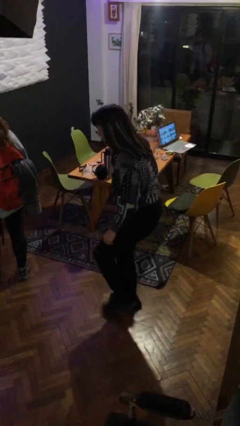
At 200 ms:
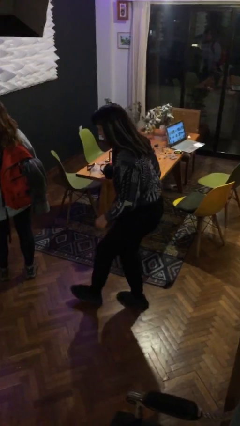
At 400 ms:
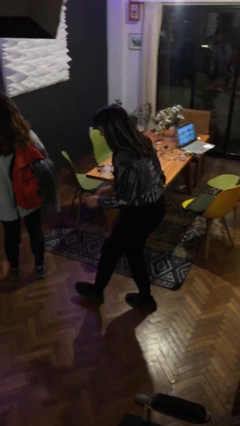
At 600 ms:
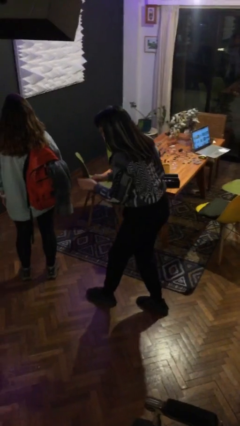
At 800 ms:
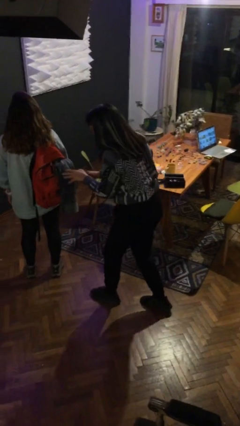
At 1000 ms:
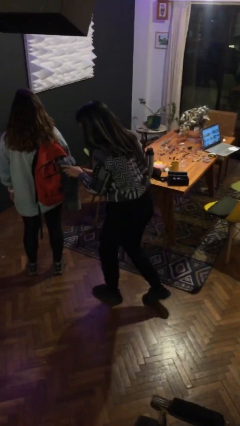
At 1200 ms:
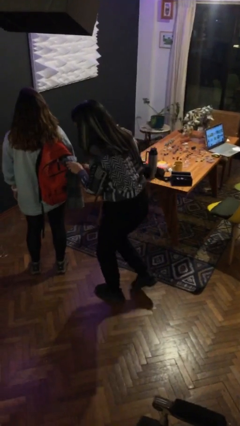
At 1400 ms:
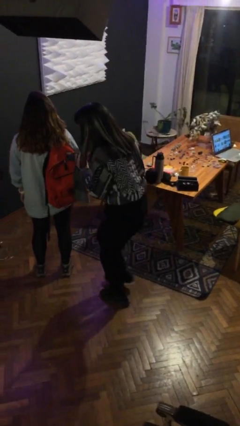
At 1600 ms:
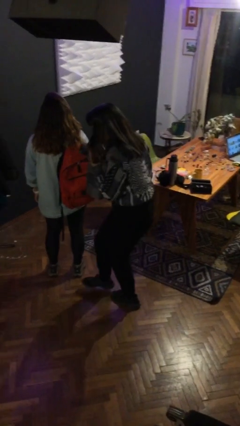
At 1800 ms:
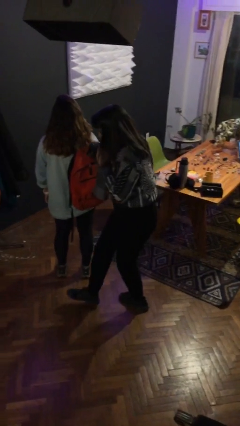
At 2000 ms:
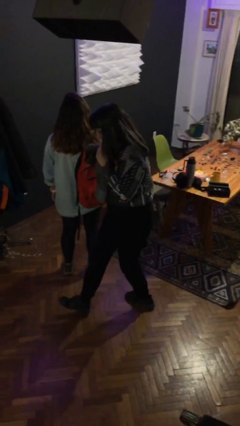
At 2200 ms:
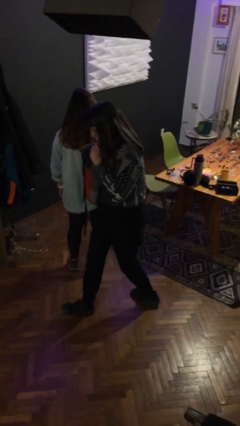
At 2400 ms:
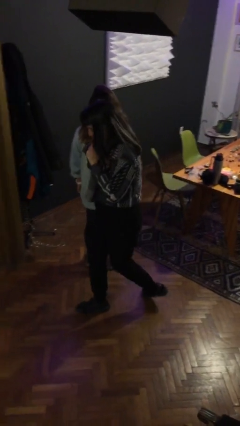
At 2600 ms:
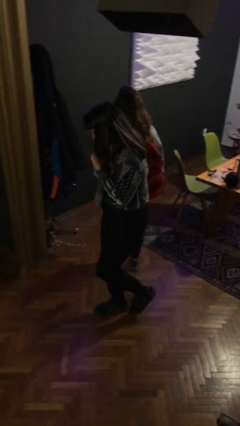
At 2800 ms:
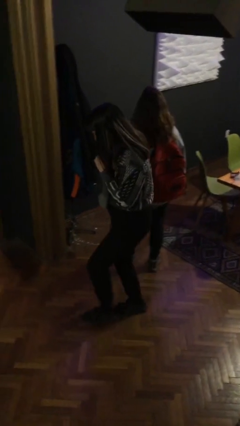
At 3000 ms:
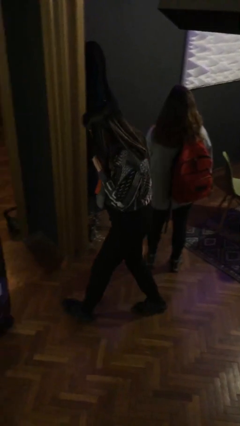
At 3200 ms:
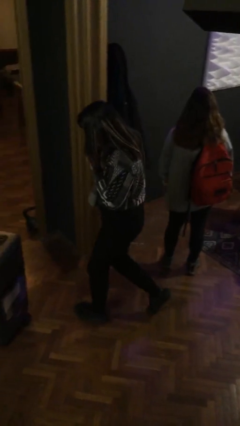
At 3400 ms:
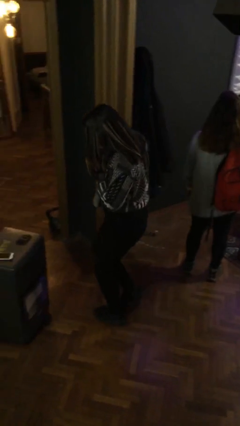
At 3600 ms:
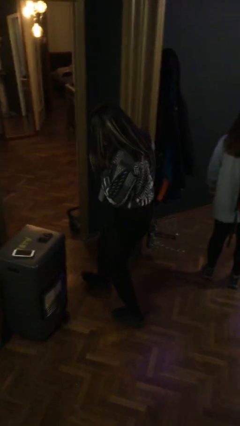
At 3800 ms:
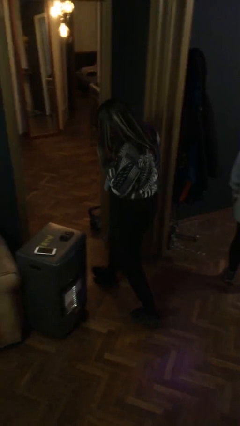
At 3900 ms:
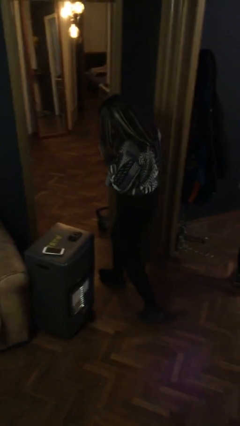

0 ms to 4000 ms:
person steals object from person

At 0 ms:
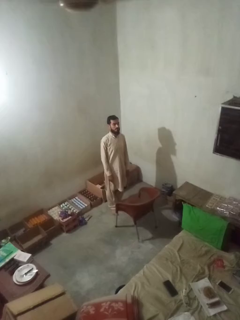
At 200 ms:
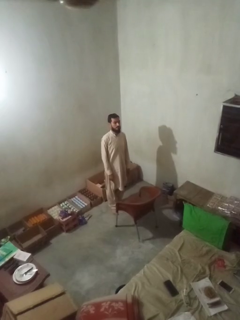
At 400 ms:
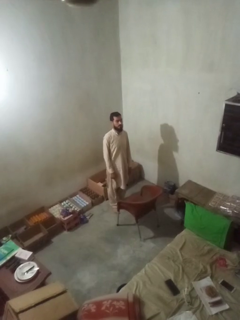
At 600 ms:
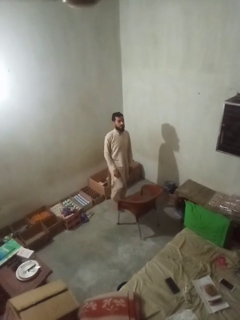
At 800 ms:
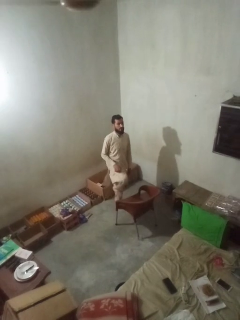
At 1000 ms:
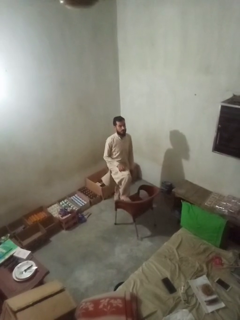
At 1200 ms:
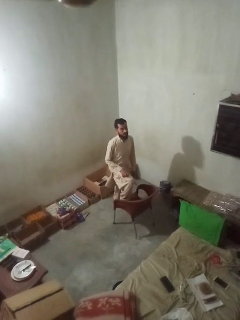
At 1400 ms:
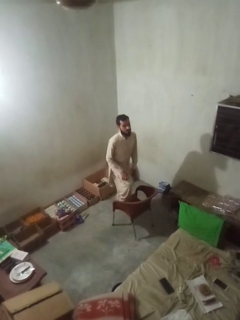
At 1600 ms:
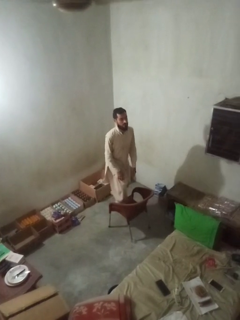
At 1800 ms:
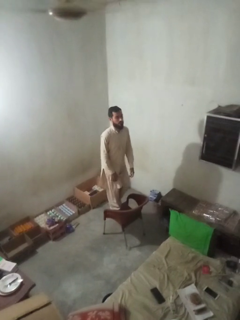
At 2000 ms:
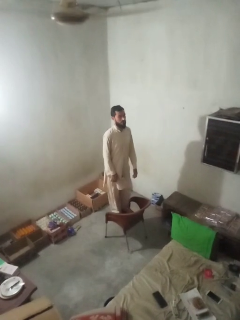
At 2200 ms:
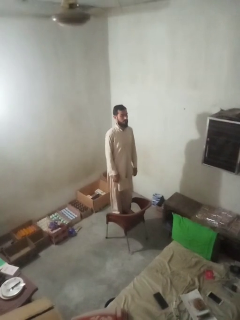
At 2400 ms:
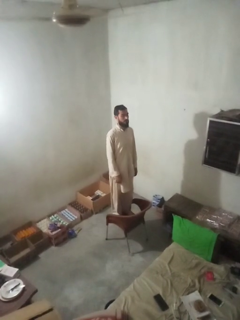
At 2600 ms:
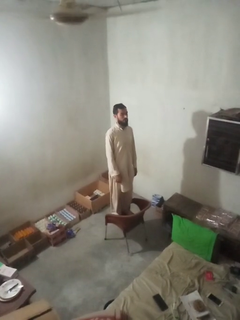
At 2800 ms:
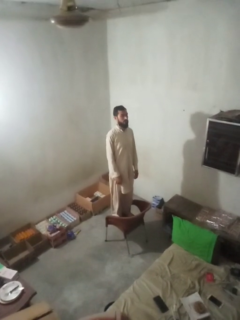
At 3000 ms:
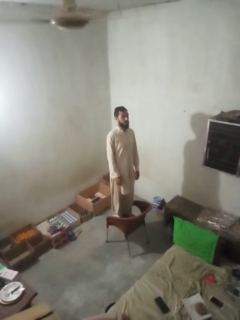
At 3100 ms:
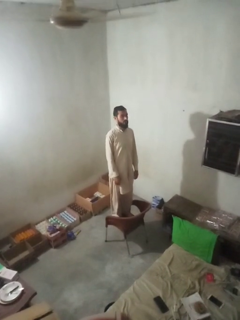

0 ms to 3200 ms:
person climbs on chair

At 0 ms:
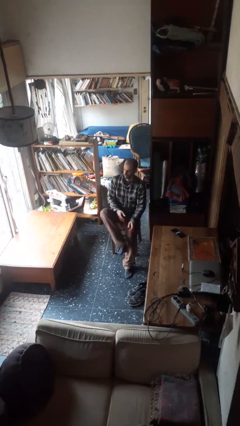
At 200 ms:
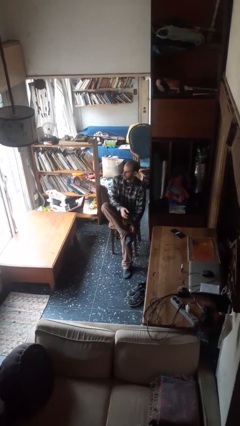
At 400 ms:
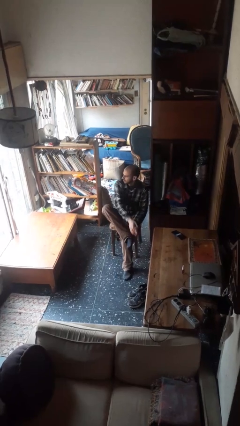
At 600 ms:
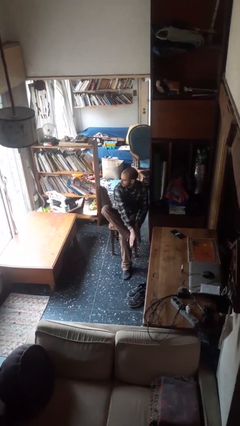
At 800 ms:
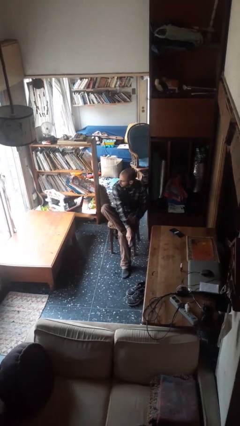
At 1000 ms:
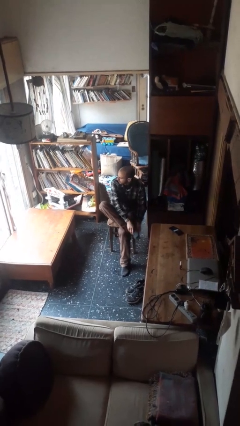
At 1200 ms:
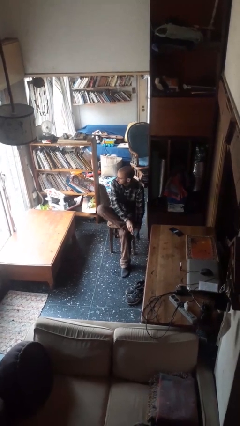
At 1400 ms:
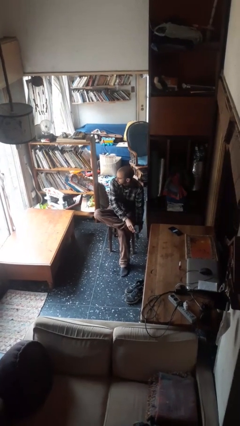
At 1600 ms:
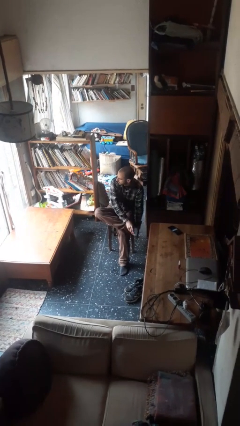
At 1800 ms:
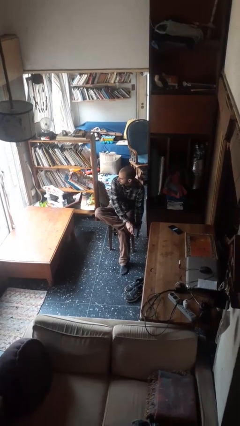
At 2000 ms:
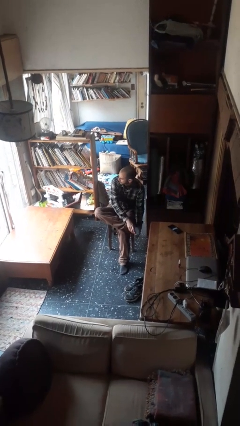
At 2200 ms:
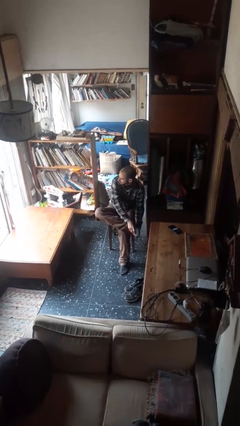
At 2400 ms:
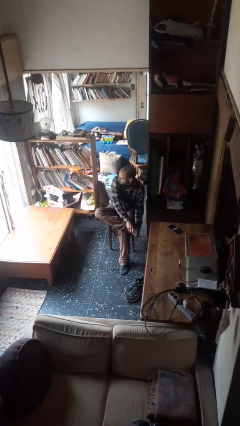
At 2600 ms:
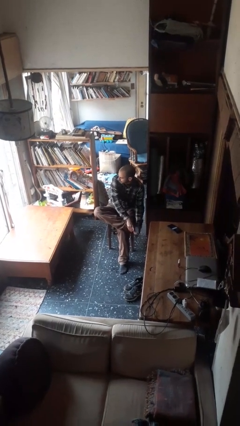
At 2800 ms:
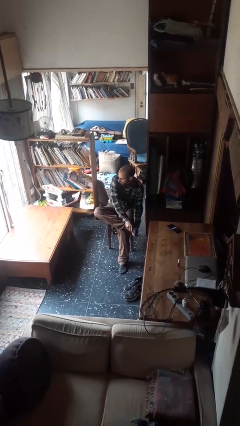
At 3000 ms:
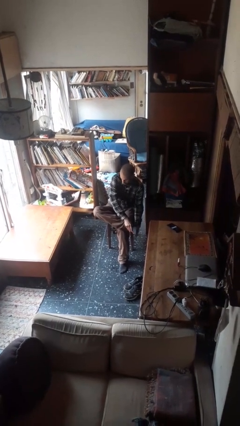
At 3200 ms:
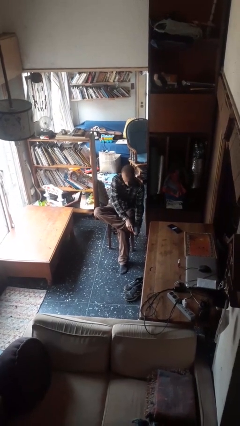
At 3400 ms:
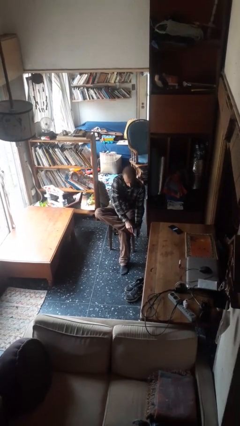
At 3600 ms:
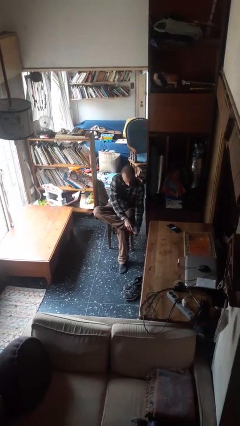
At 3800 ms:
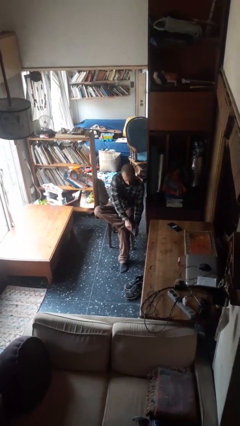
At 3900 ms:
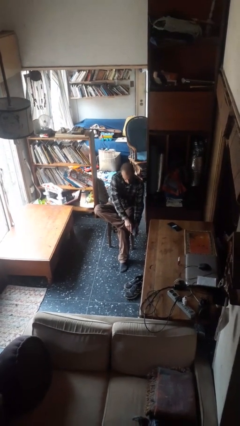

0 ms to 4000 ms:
person rubs foot

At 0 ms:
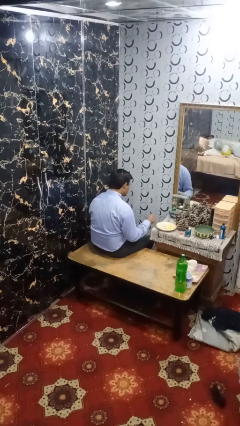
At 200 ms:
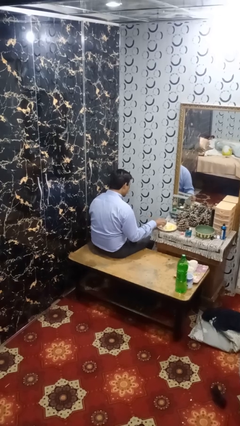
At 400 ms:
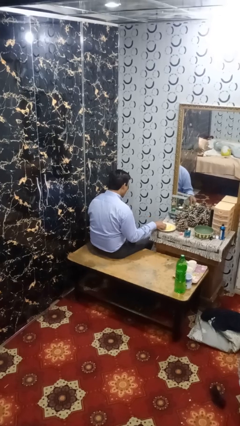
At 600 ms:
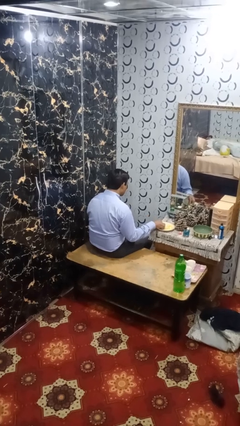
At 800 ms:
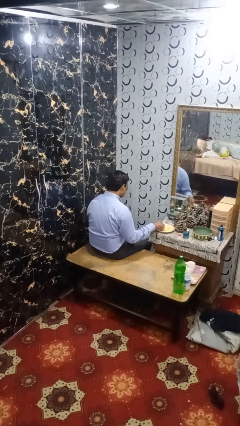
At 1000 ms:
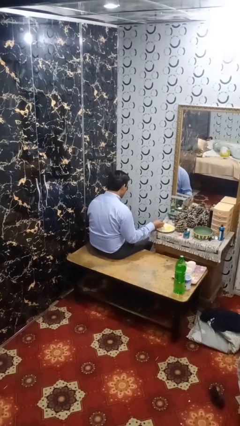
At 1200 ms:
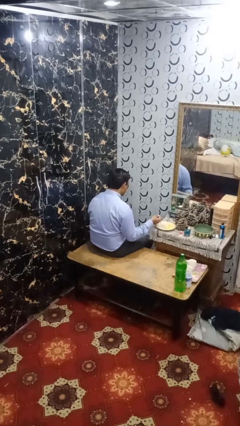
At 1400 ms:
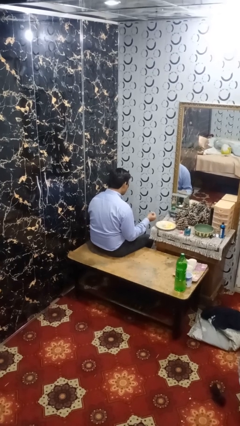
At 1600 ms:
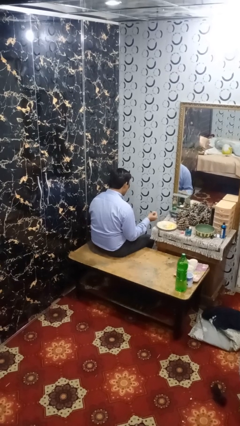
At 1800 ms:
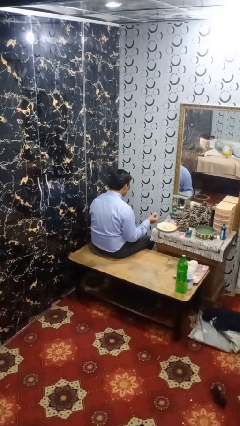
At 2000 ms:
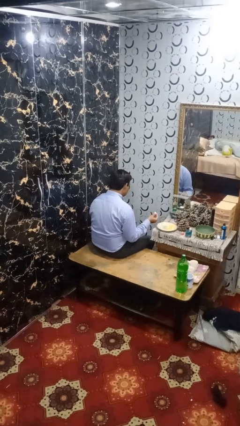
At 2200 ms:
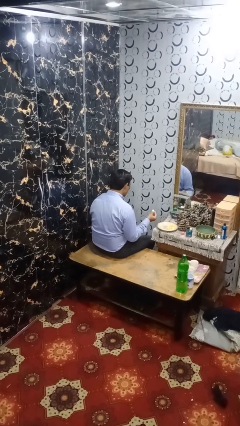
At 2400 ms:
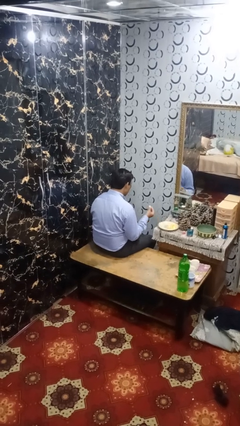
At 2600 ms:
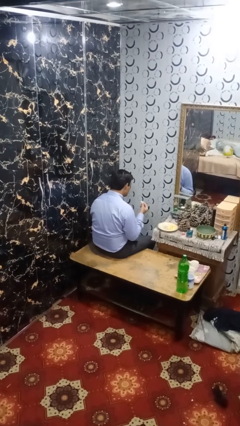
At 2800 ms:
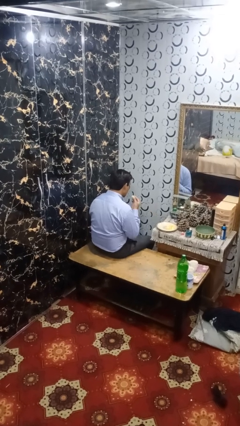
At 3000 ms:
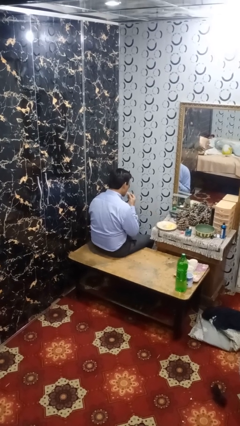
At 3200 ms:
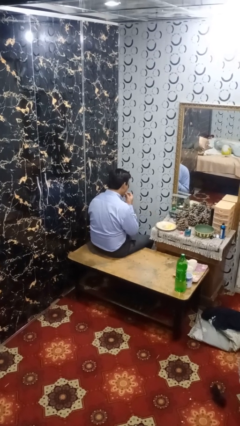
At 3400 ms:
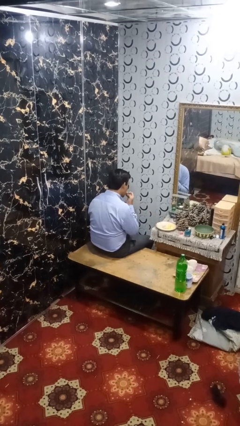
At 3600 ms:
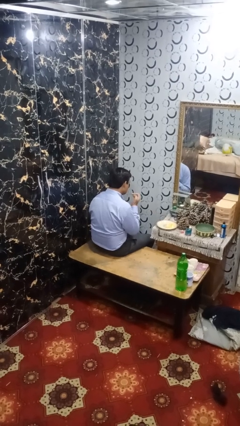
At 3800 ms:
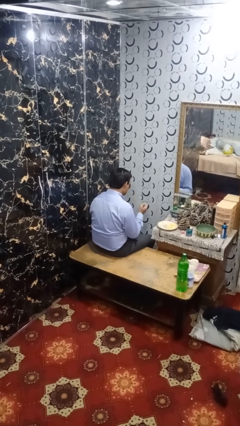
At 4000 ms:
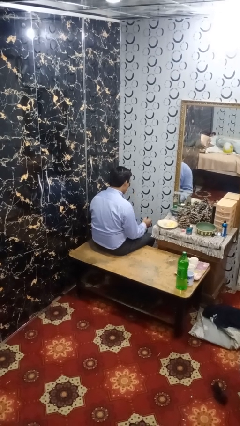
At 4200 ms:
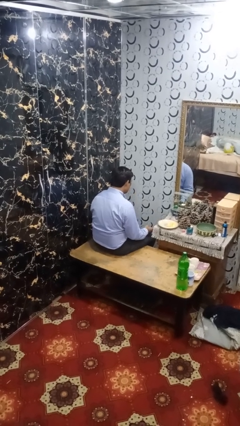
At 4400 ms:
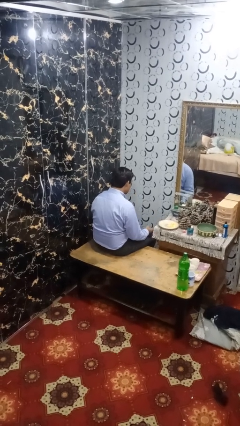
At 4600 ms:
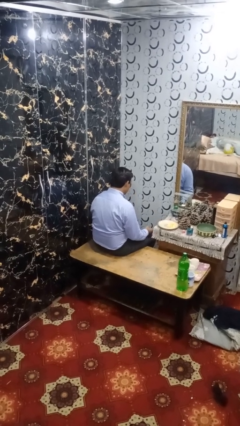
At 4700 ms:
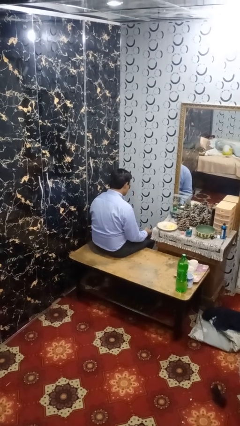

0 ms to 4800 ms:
person eats with hands

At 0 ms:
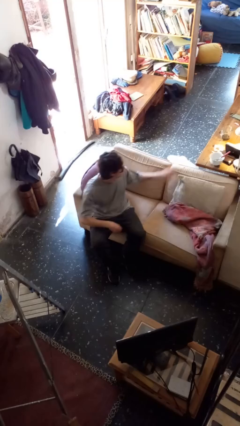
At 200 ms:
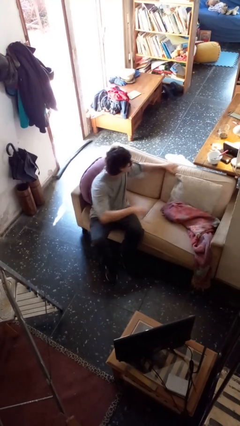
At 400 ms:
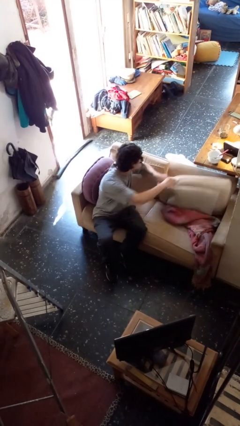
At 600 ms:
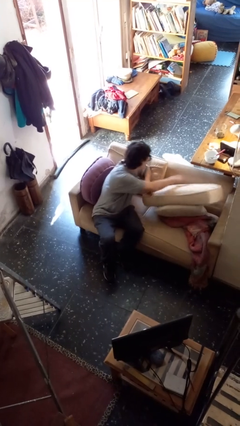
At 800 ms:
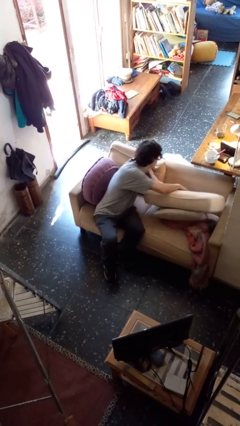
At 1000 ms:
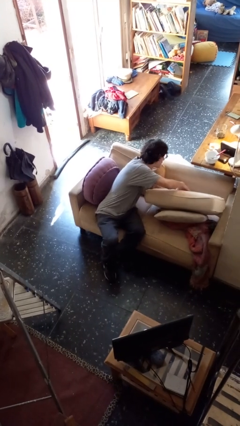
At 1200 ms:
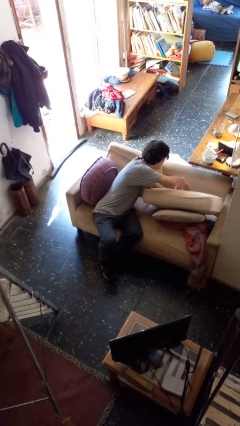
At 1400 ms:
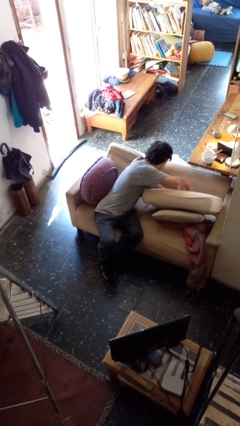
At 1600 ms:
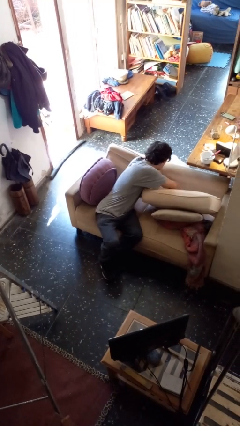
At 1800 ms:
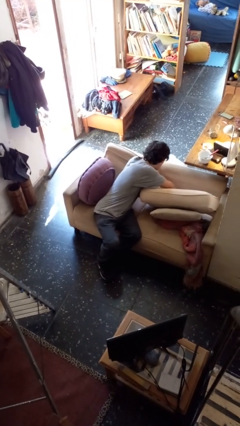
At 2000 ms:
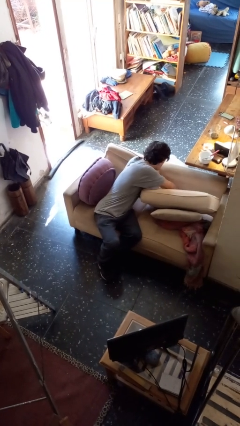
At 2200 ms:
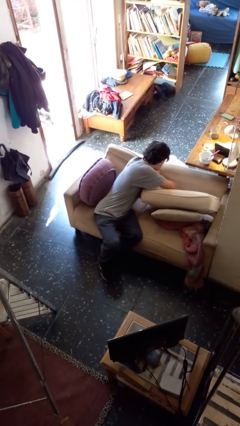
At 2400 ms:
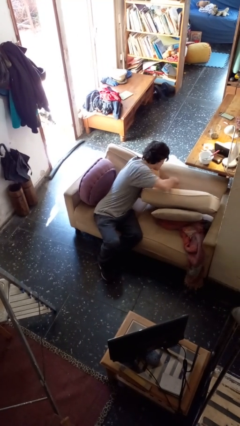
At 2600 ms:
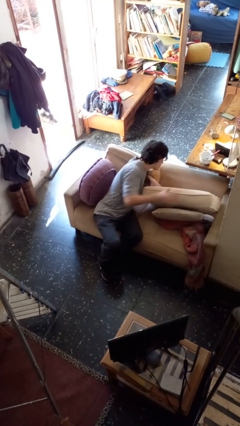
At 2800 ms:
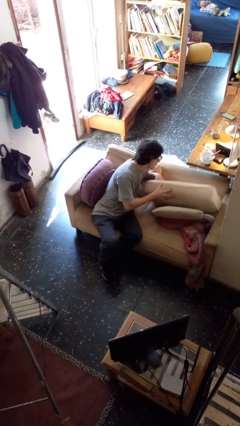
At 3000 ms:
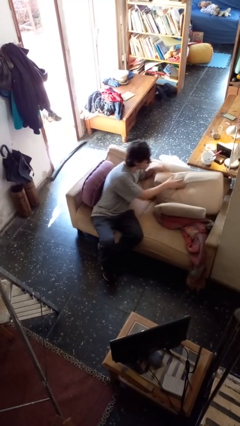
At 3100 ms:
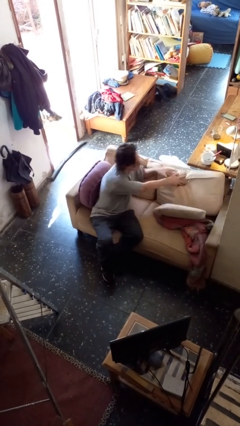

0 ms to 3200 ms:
person searches in couch
